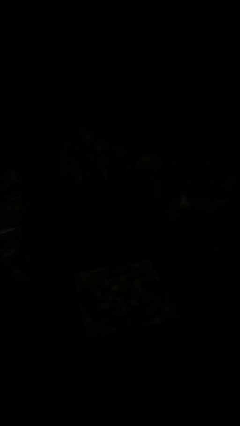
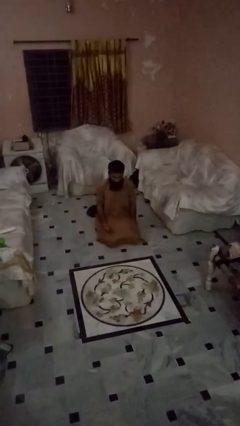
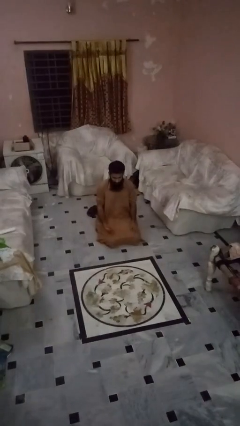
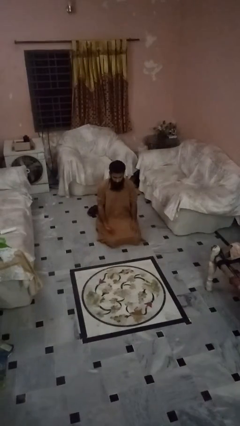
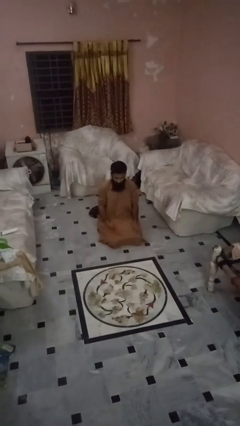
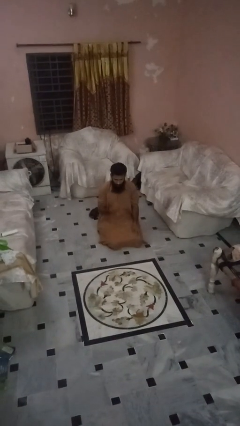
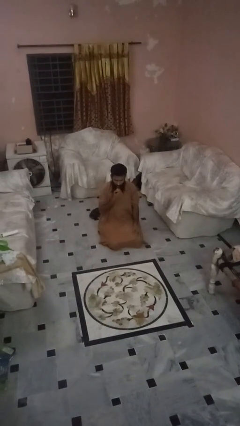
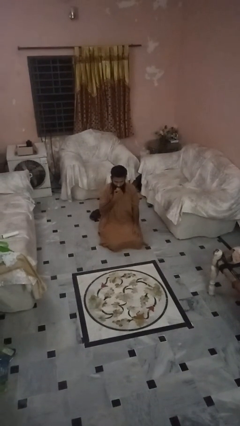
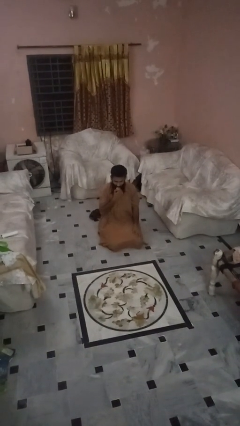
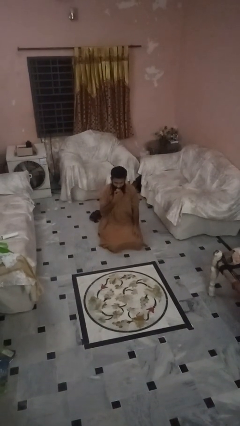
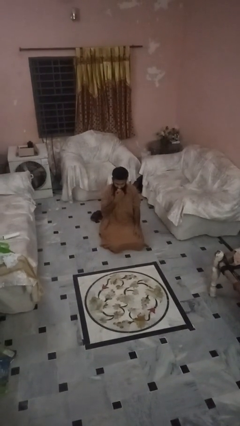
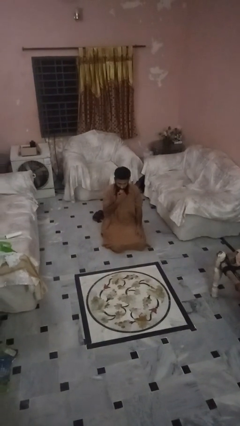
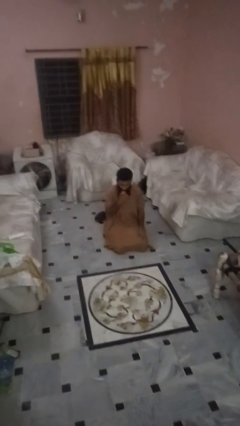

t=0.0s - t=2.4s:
person eats apple

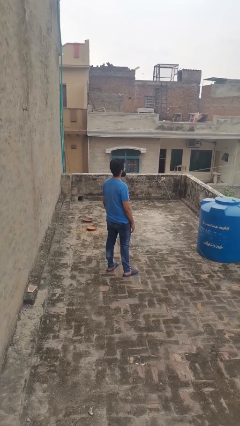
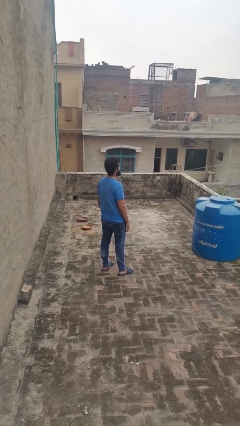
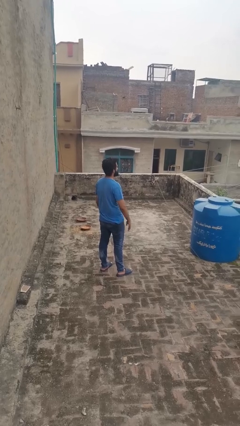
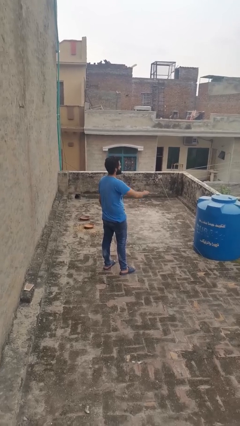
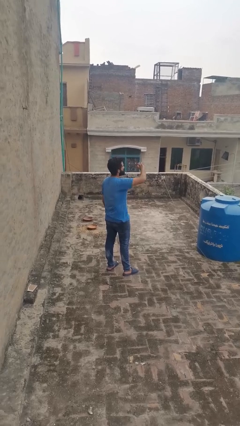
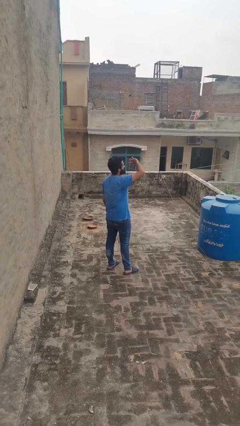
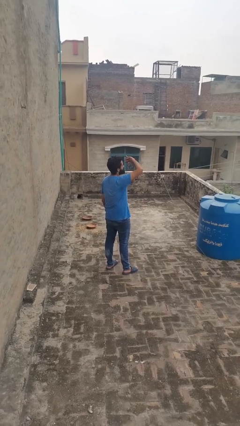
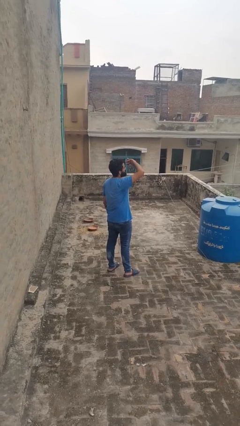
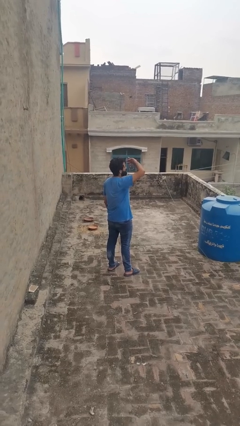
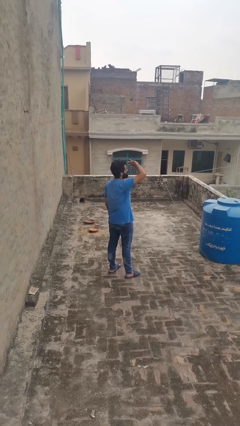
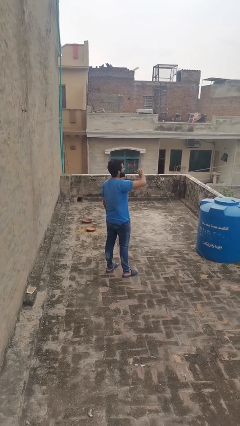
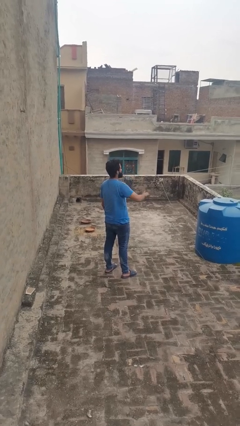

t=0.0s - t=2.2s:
person shades eyes

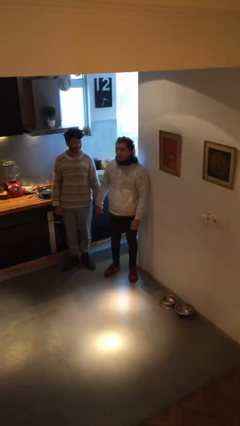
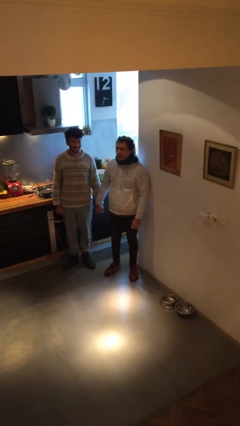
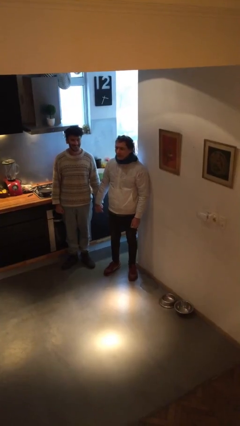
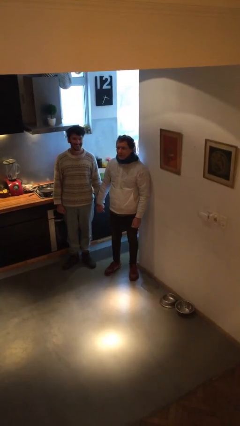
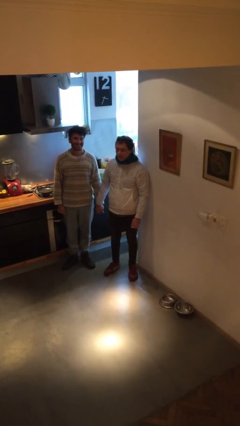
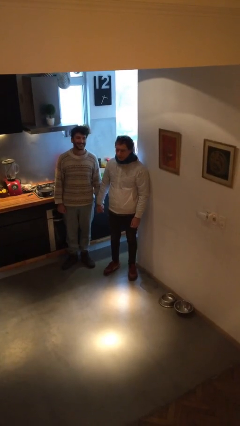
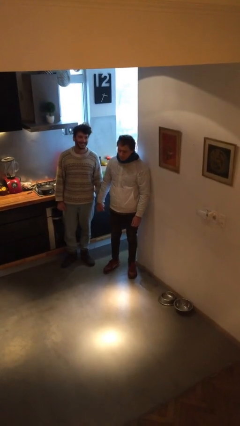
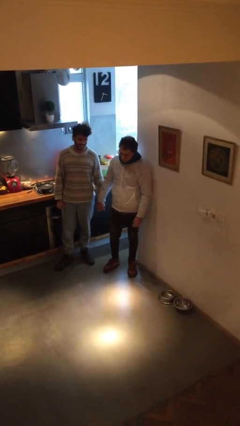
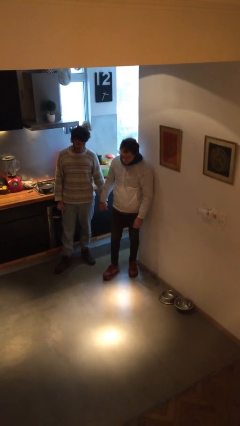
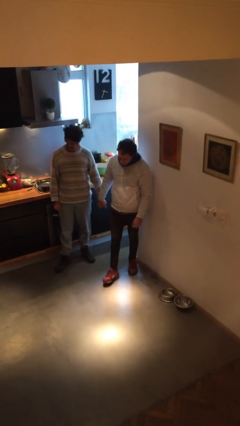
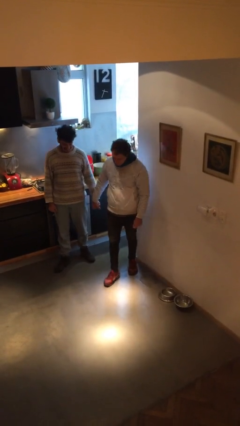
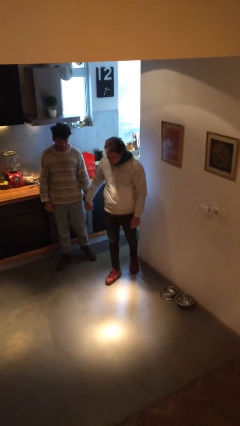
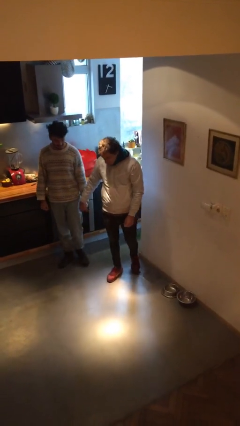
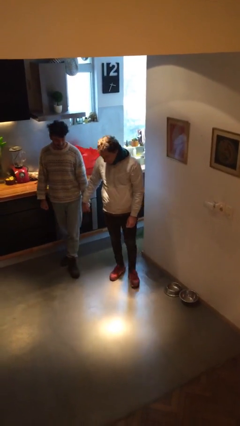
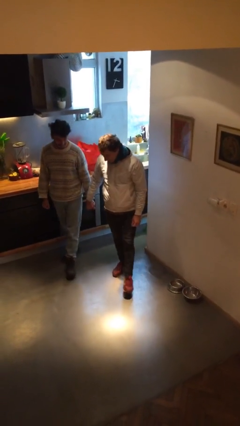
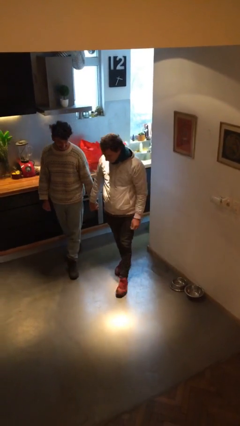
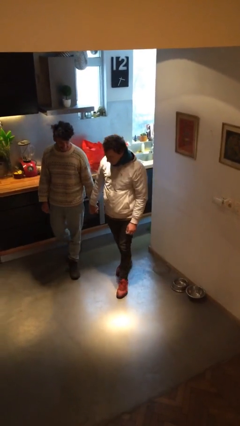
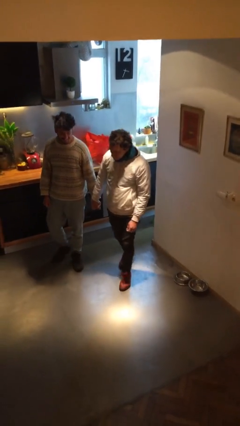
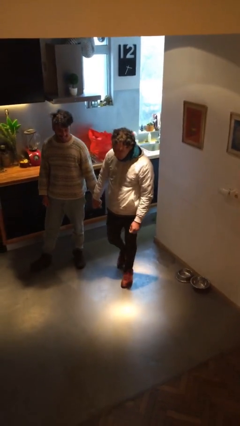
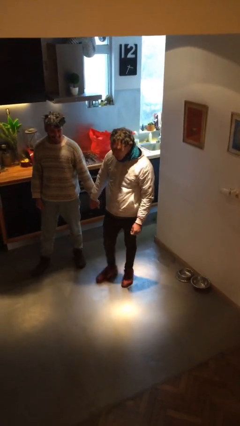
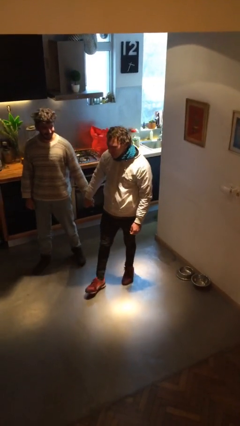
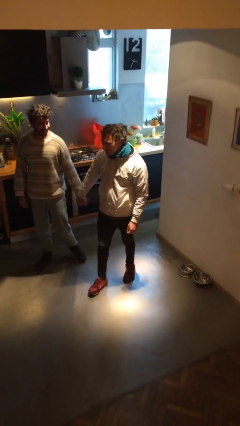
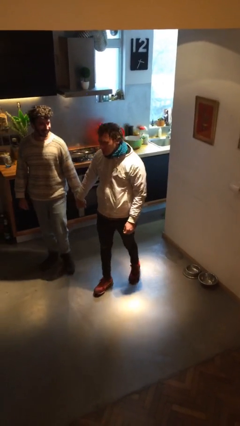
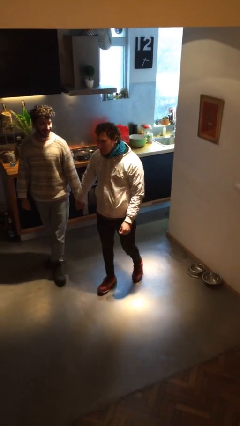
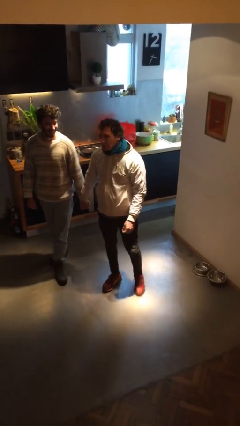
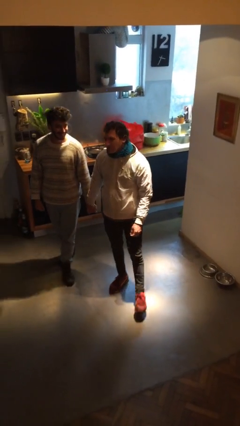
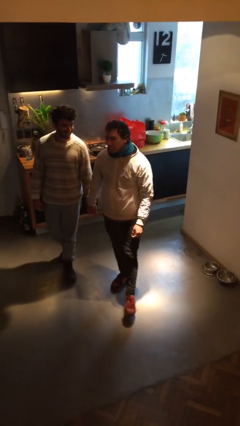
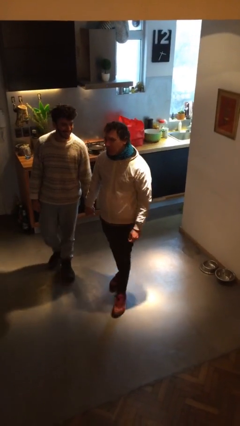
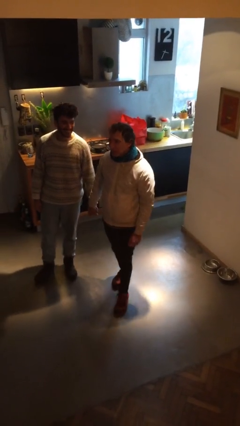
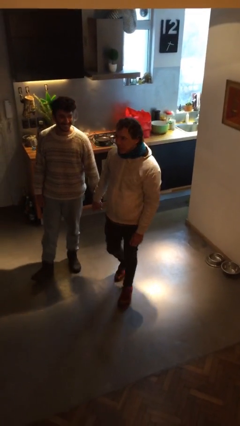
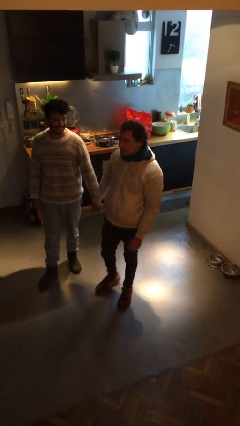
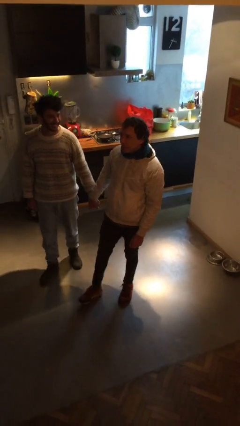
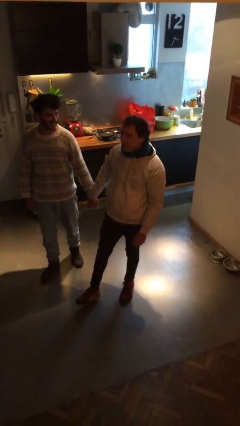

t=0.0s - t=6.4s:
person holds hand

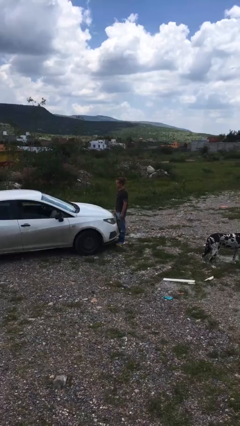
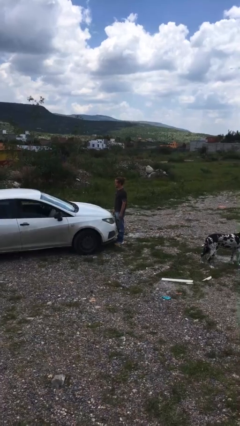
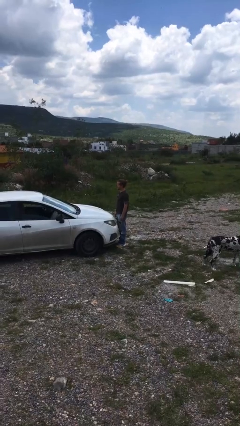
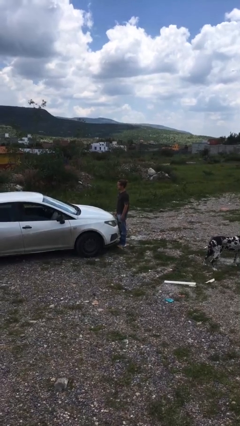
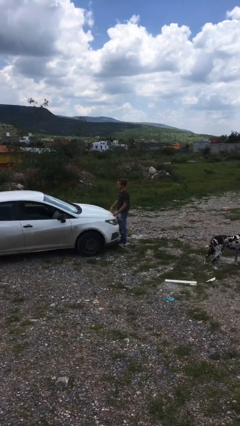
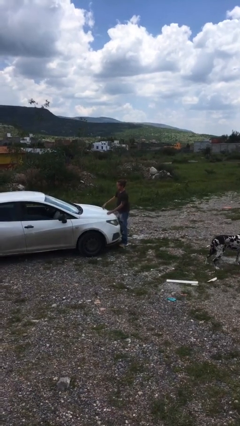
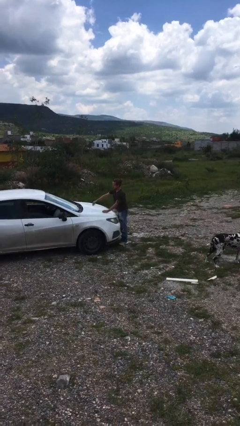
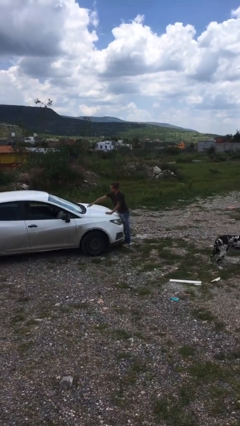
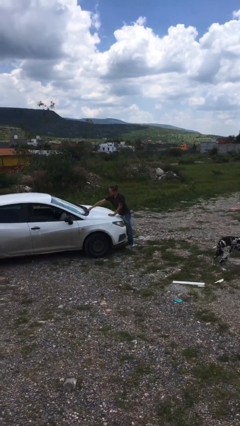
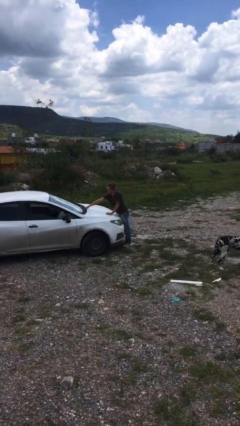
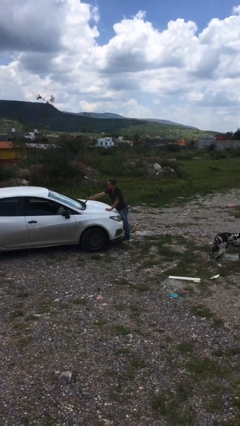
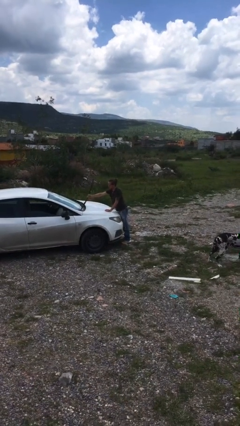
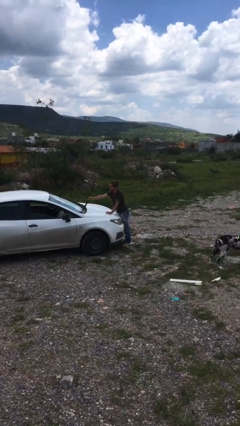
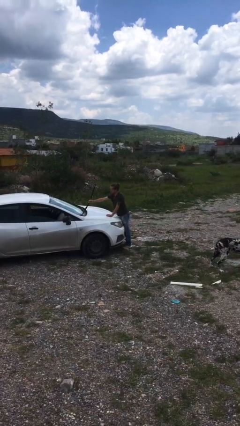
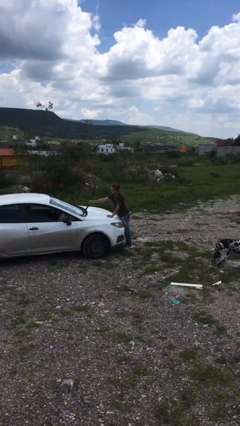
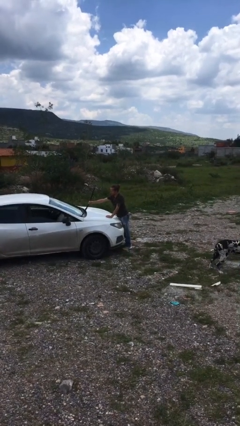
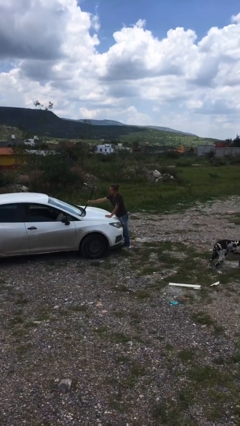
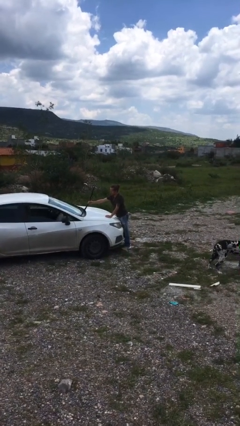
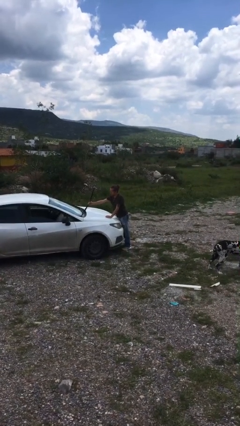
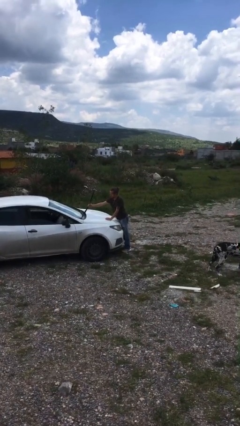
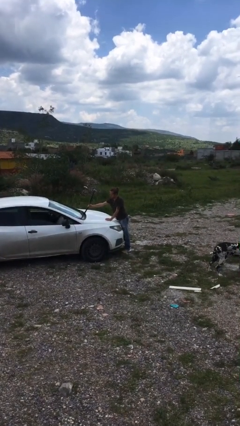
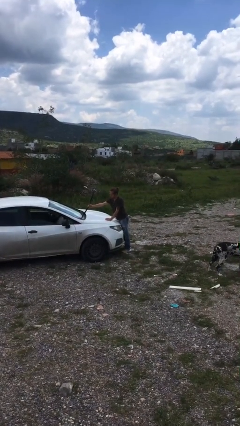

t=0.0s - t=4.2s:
person flips up car wipers

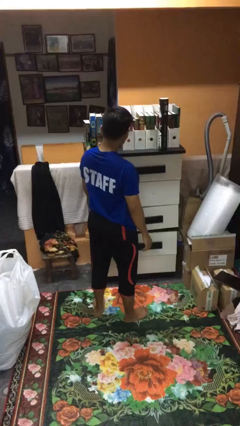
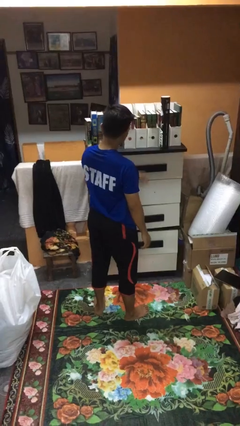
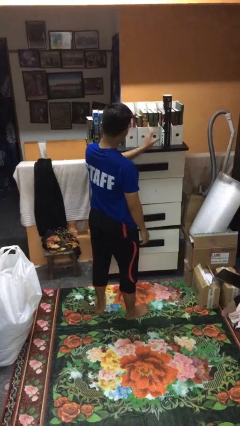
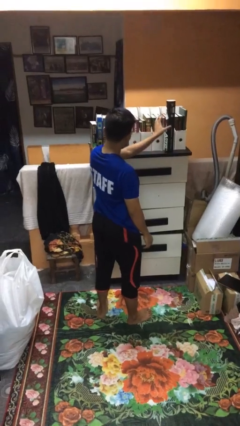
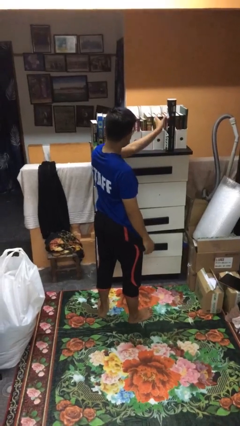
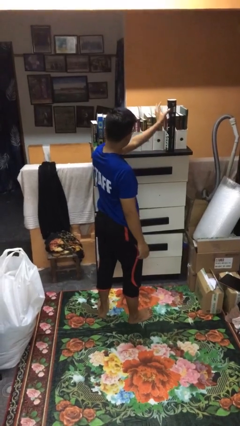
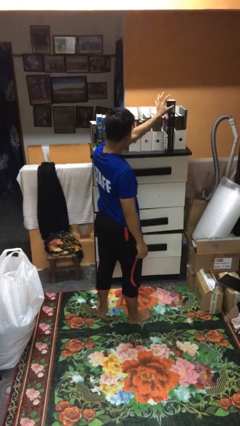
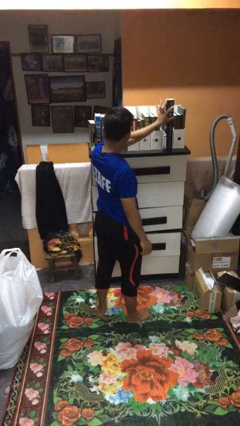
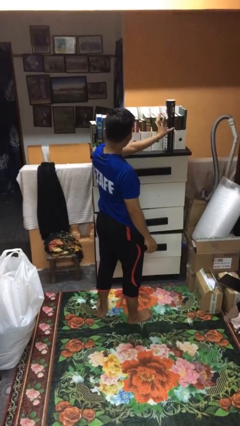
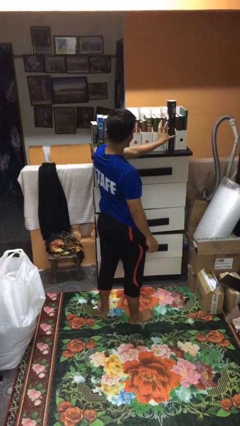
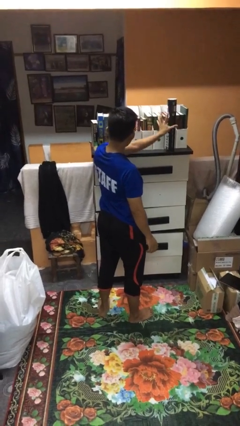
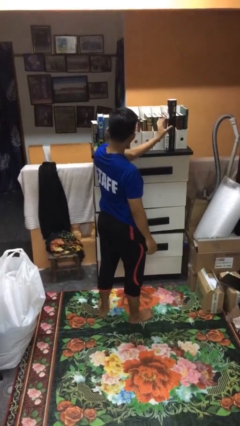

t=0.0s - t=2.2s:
person waves hand over object

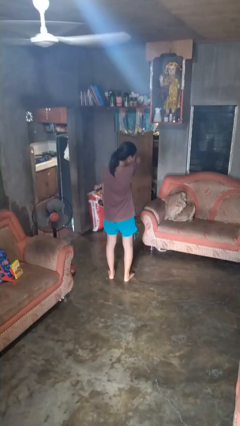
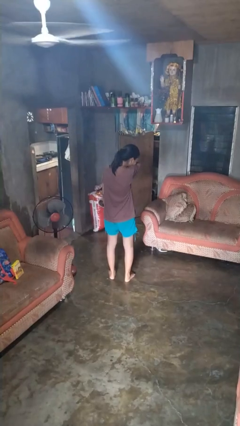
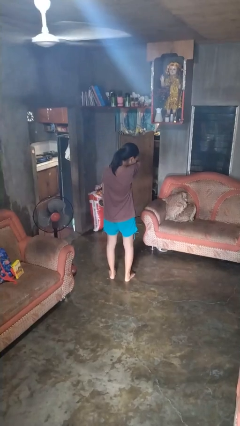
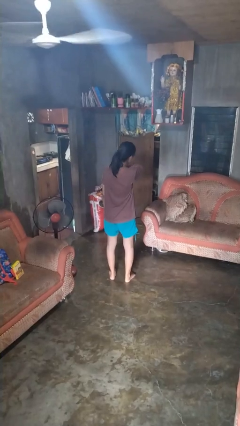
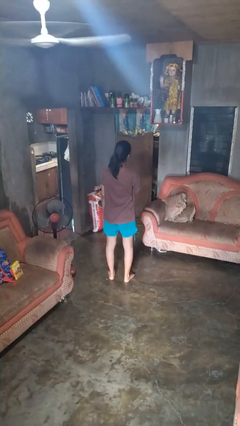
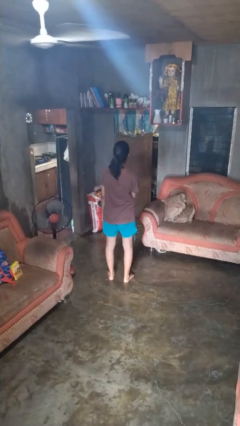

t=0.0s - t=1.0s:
person sneezes into arm
